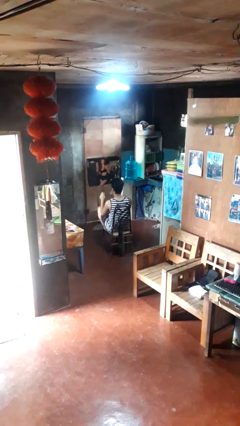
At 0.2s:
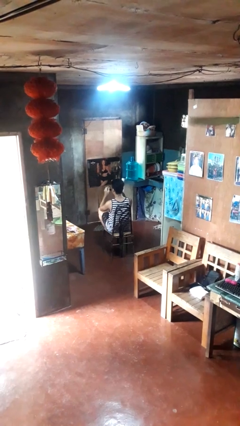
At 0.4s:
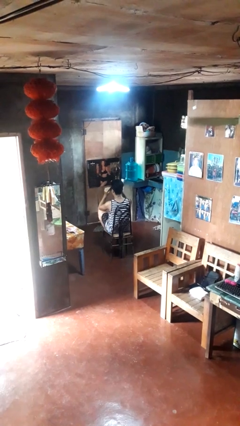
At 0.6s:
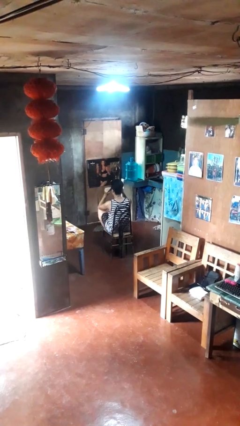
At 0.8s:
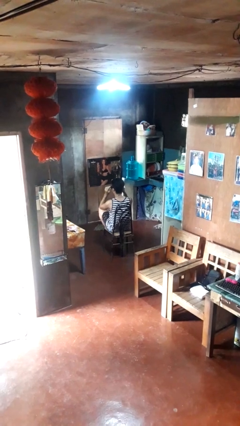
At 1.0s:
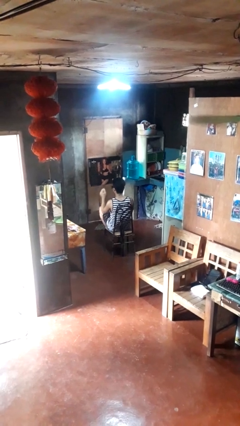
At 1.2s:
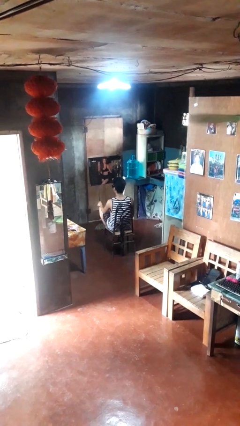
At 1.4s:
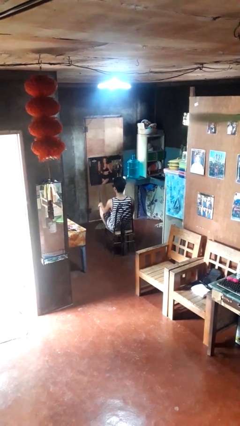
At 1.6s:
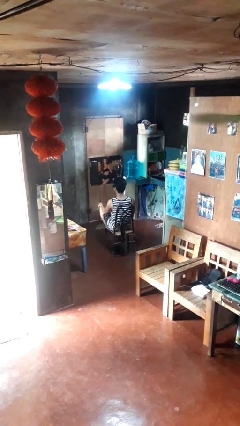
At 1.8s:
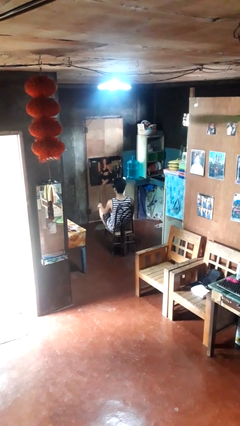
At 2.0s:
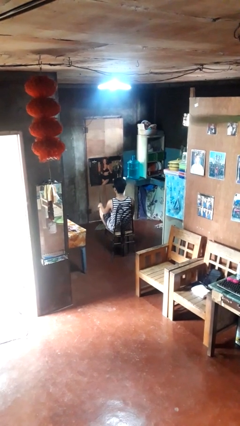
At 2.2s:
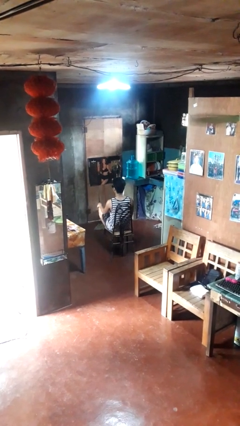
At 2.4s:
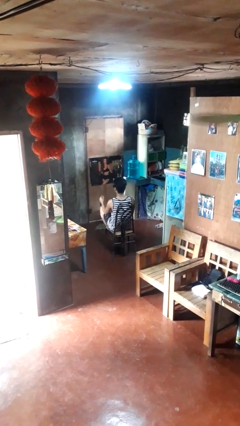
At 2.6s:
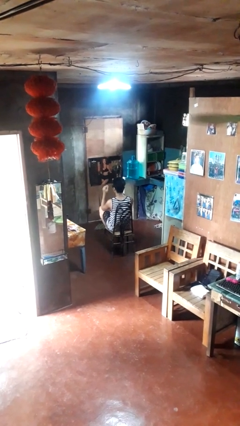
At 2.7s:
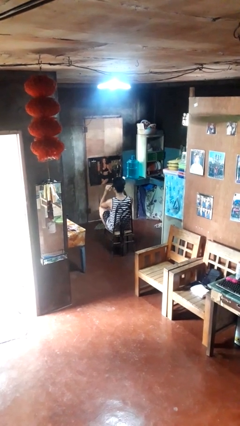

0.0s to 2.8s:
person puts on sunglasses

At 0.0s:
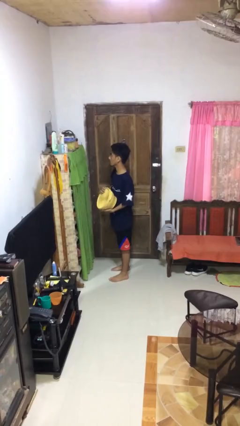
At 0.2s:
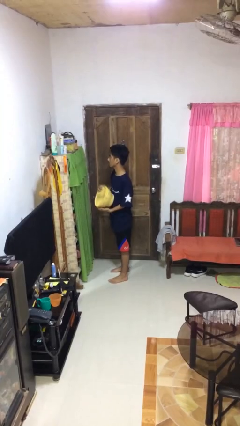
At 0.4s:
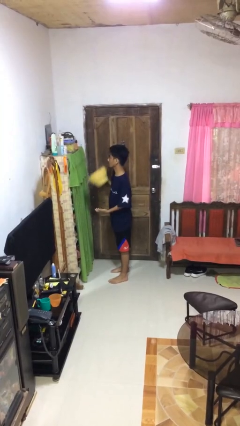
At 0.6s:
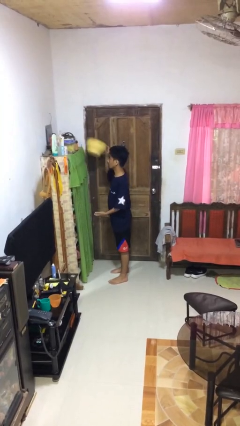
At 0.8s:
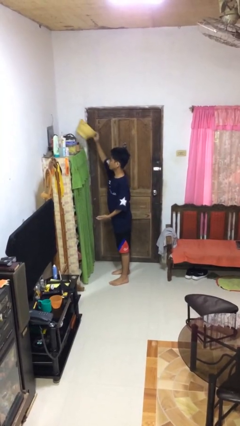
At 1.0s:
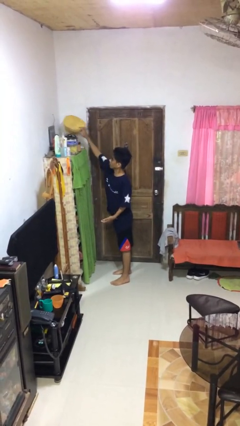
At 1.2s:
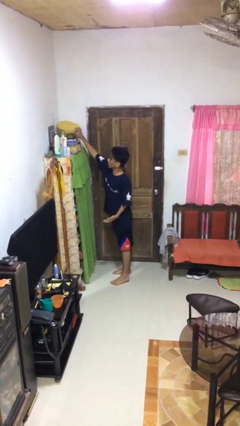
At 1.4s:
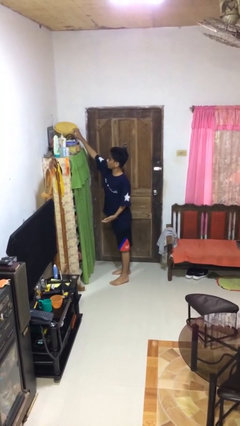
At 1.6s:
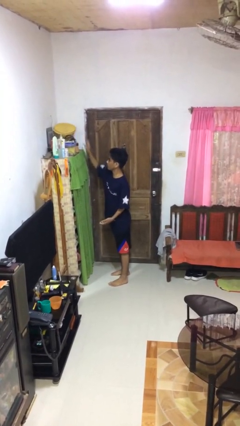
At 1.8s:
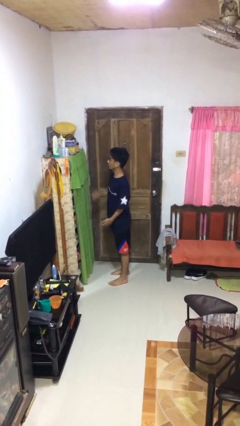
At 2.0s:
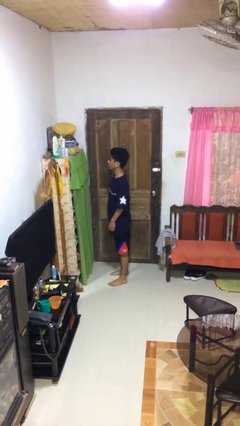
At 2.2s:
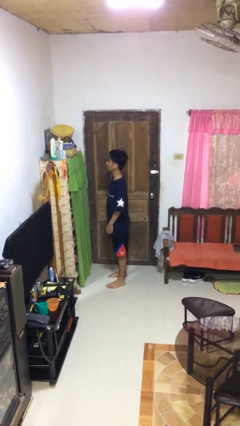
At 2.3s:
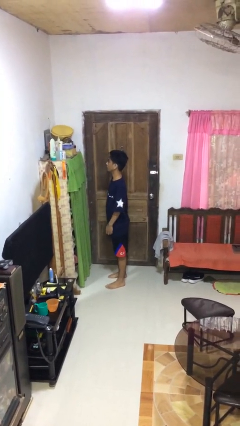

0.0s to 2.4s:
person puts down object on shelf

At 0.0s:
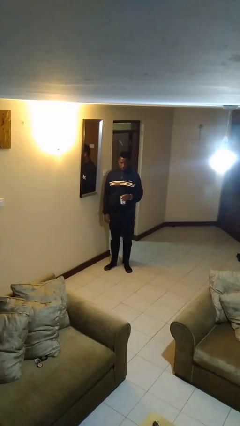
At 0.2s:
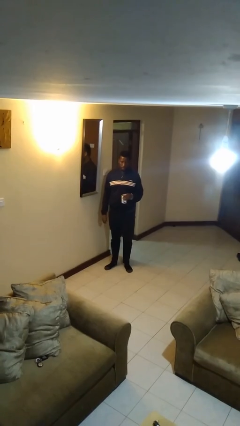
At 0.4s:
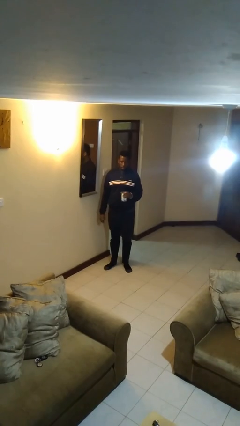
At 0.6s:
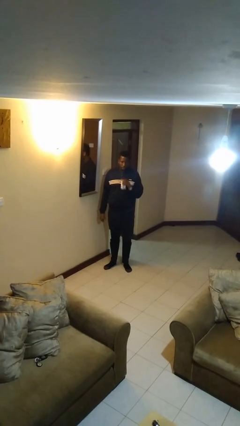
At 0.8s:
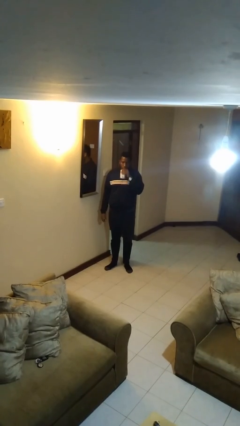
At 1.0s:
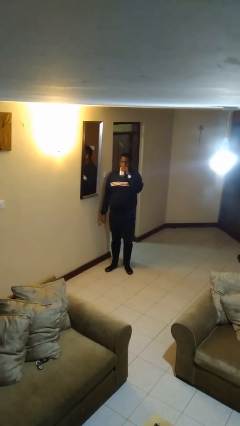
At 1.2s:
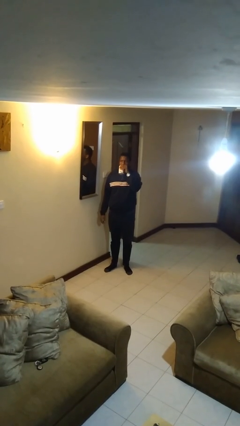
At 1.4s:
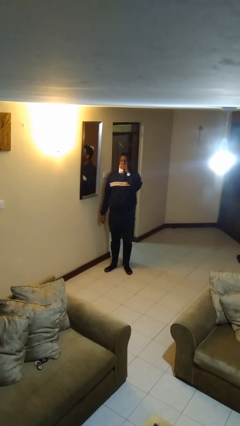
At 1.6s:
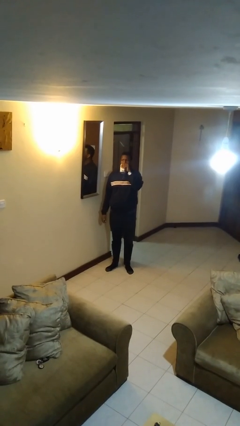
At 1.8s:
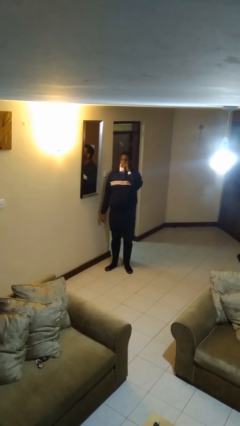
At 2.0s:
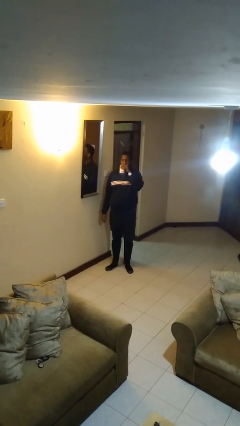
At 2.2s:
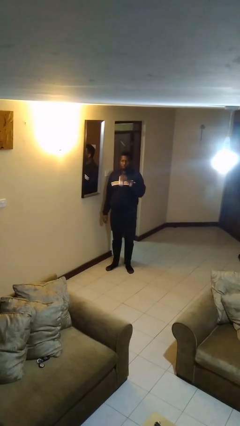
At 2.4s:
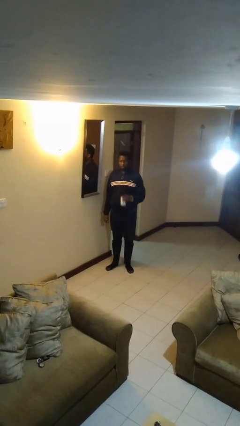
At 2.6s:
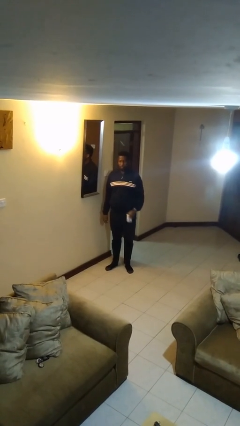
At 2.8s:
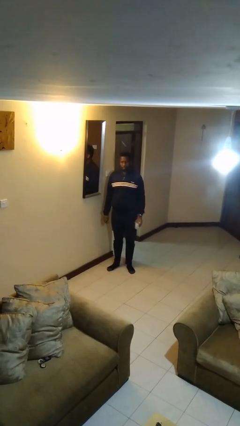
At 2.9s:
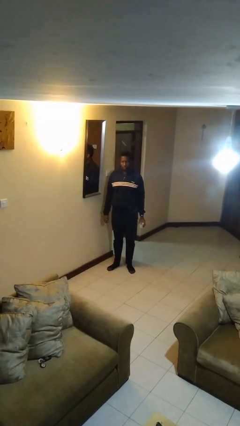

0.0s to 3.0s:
person drinks from beverage can

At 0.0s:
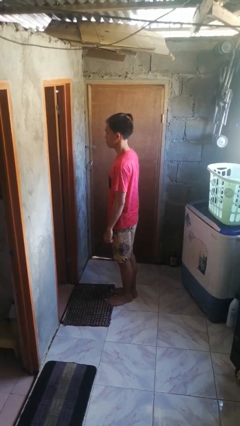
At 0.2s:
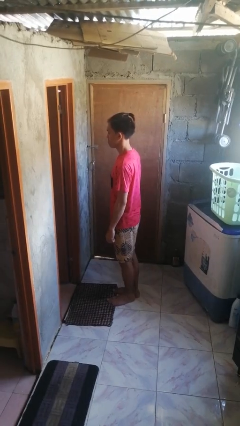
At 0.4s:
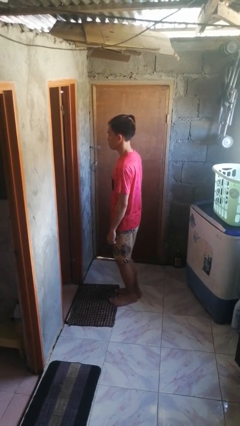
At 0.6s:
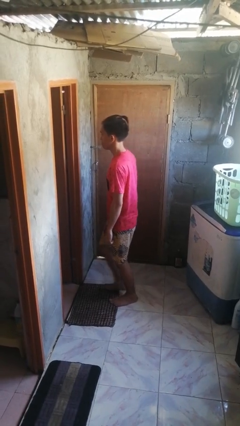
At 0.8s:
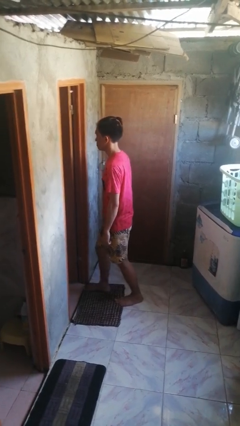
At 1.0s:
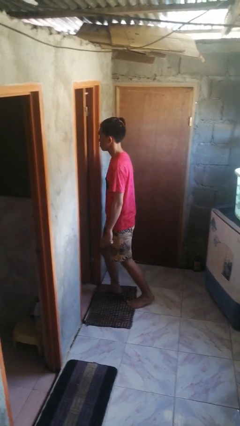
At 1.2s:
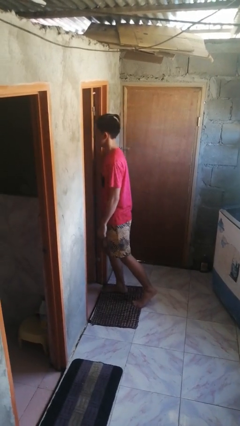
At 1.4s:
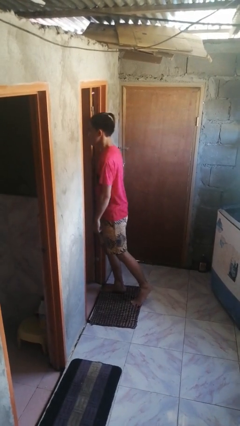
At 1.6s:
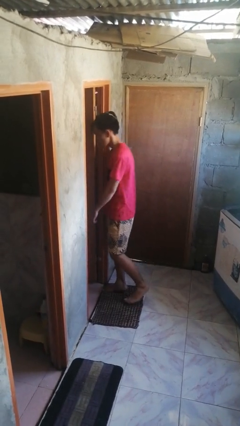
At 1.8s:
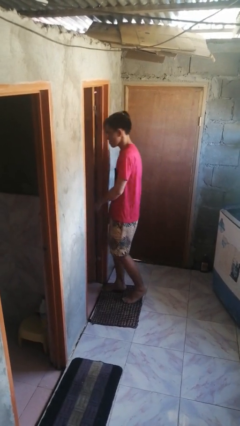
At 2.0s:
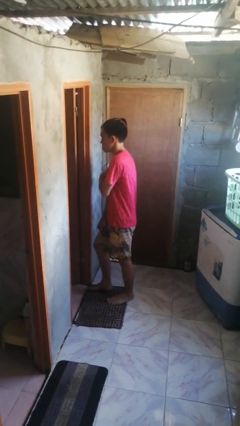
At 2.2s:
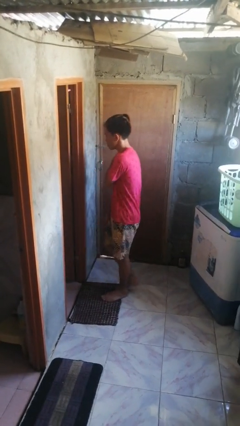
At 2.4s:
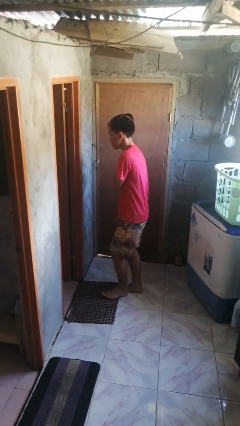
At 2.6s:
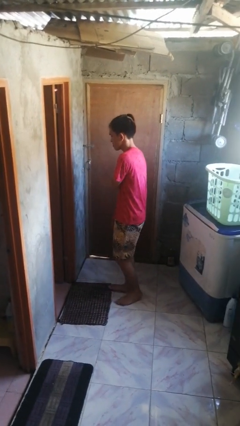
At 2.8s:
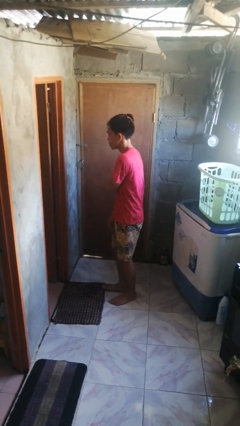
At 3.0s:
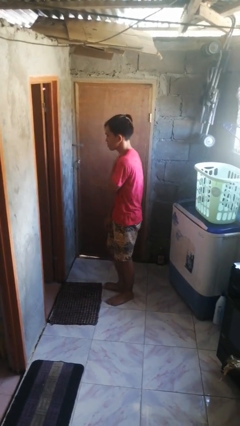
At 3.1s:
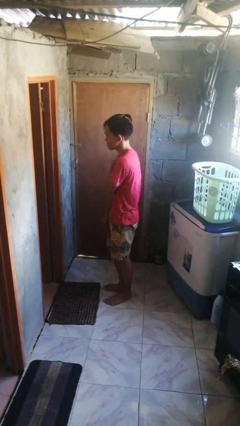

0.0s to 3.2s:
person bumps into wall

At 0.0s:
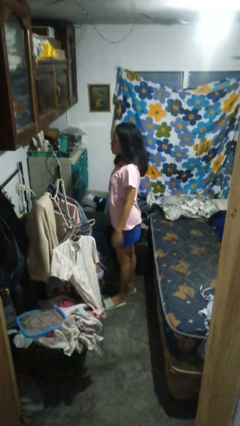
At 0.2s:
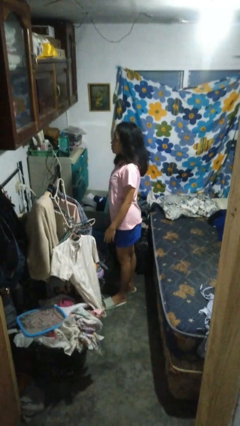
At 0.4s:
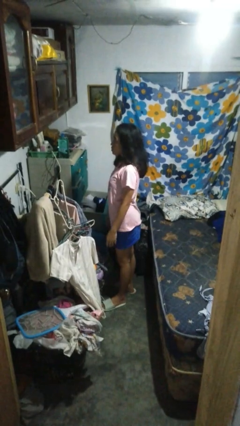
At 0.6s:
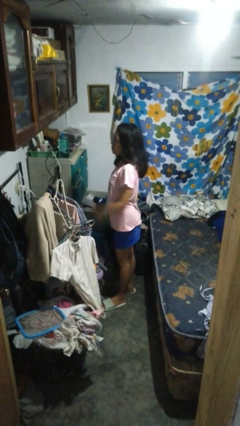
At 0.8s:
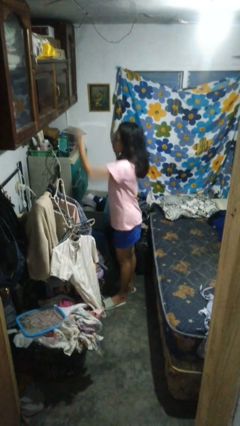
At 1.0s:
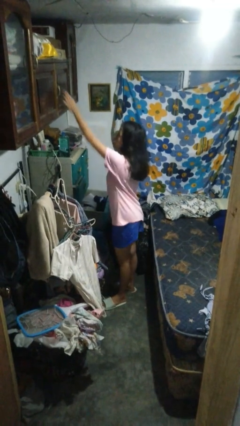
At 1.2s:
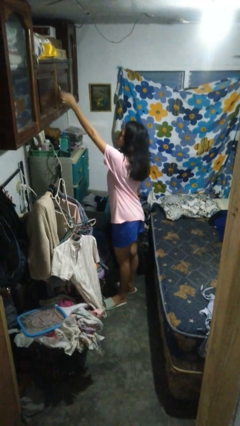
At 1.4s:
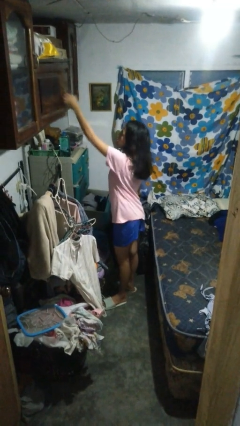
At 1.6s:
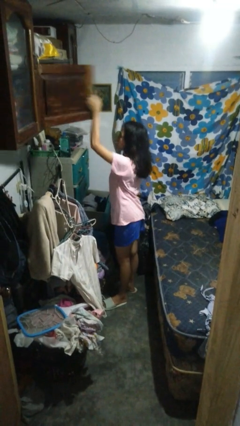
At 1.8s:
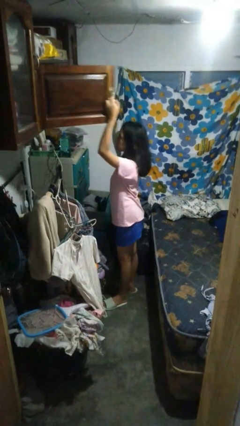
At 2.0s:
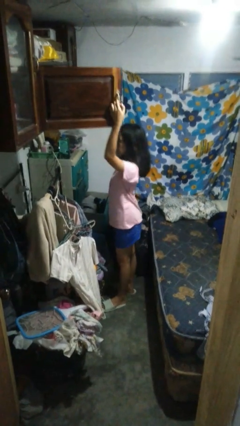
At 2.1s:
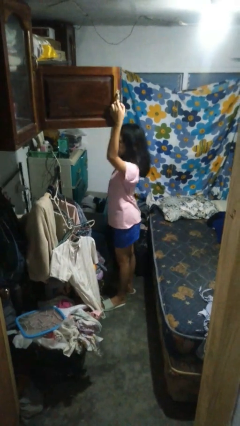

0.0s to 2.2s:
person opens closet door

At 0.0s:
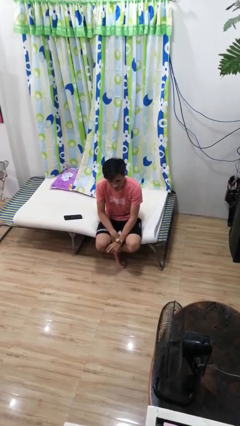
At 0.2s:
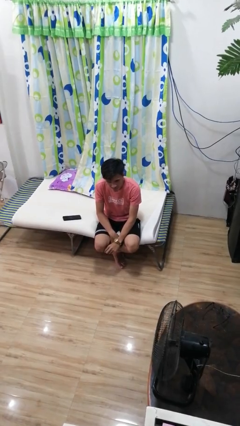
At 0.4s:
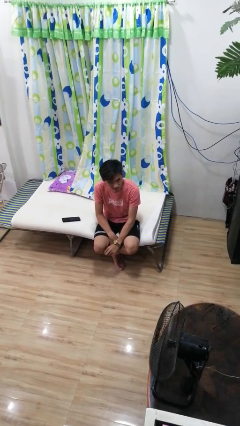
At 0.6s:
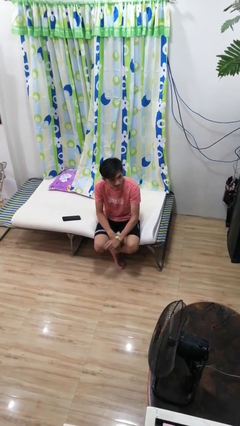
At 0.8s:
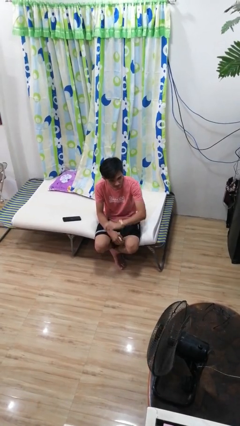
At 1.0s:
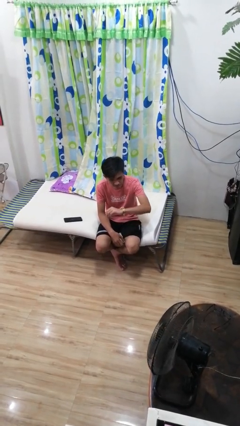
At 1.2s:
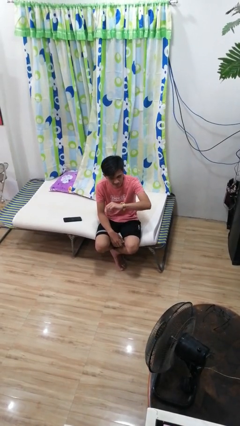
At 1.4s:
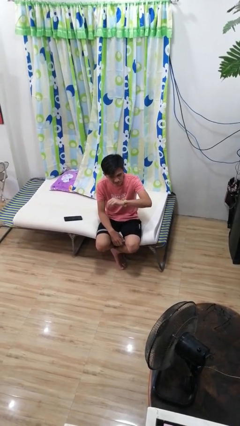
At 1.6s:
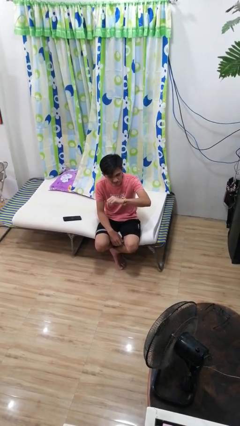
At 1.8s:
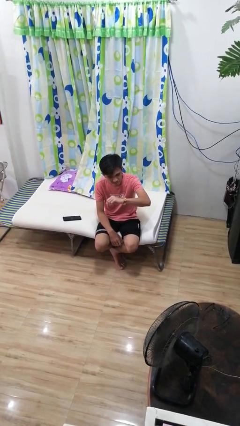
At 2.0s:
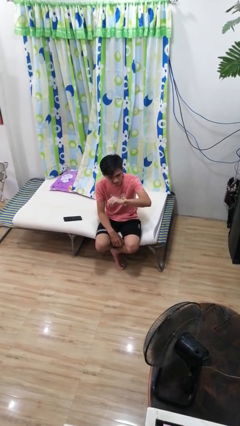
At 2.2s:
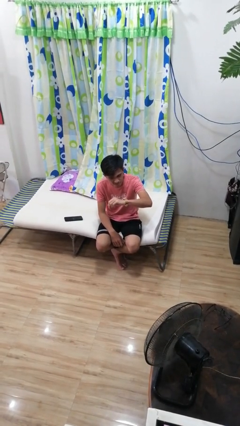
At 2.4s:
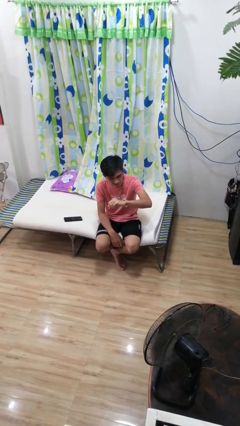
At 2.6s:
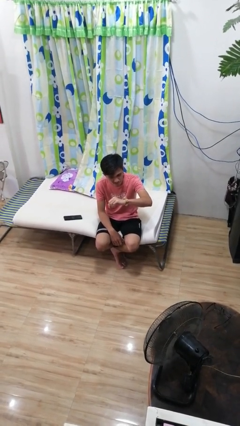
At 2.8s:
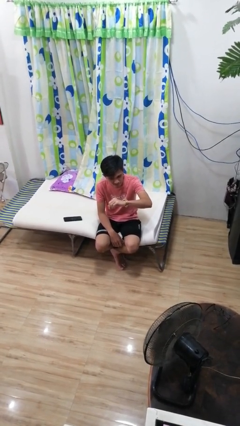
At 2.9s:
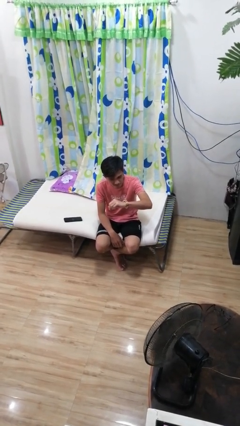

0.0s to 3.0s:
person looks at wristwatch

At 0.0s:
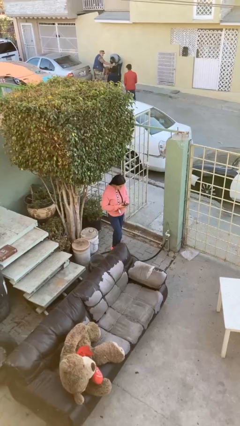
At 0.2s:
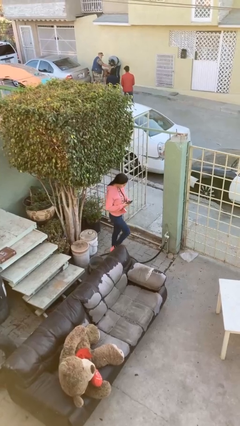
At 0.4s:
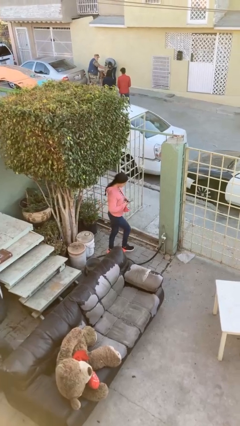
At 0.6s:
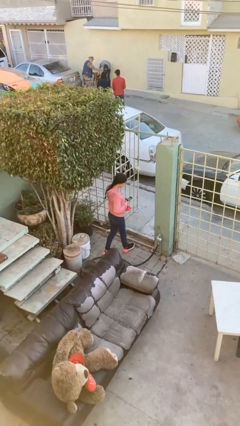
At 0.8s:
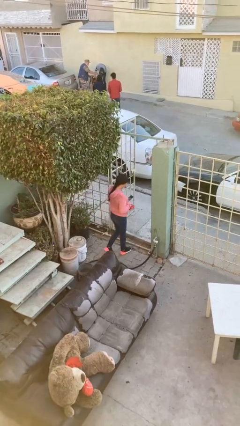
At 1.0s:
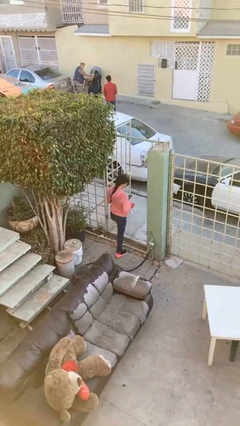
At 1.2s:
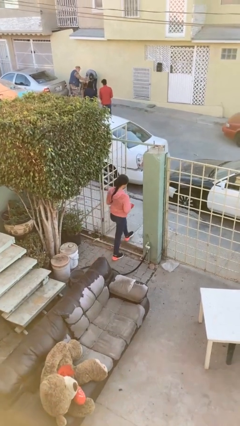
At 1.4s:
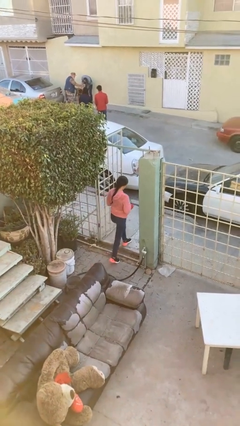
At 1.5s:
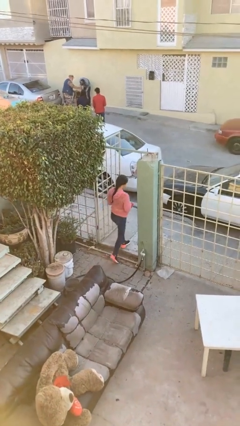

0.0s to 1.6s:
person exits scene through structure
